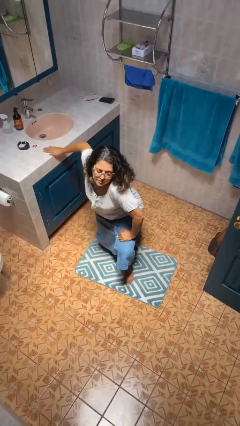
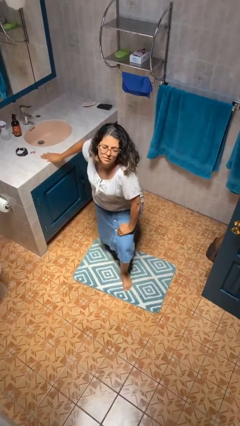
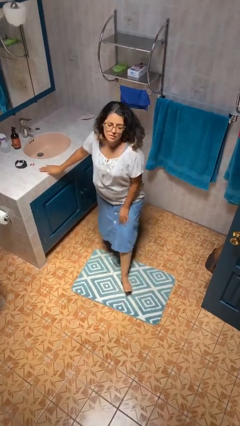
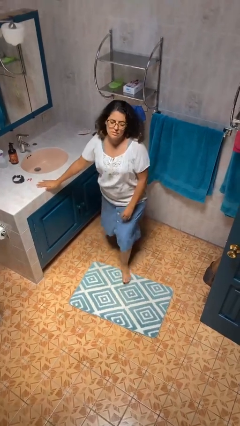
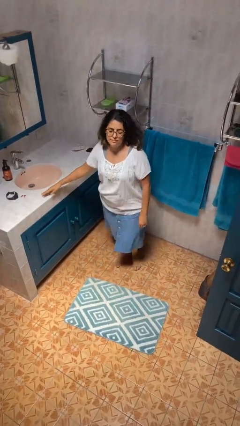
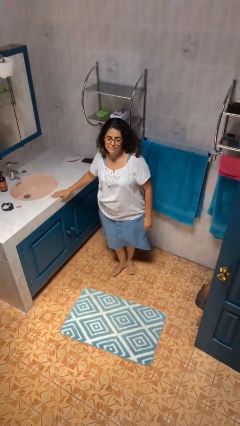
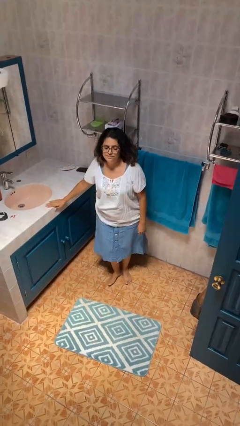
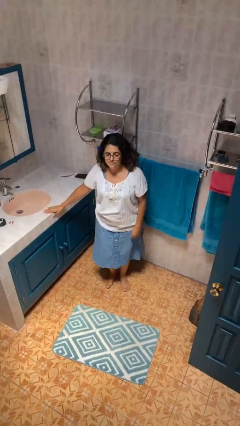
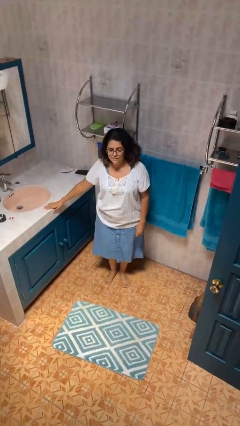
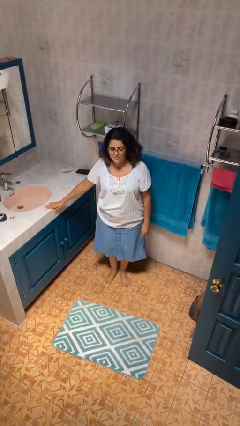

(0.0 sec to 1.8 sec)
person stands up from floor

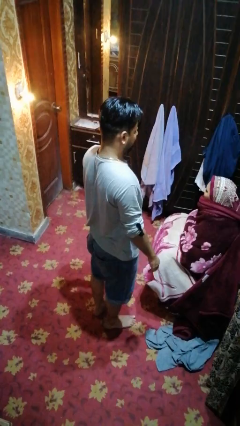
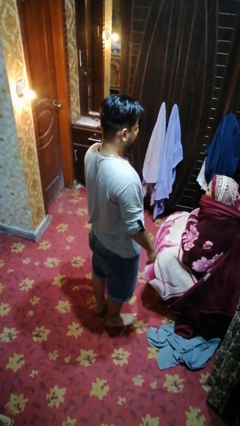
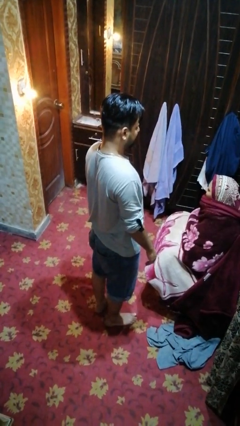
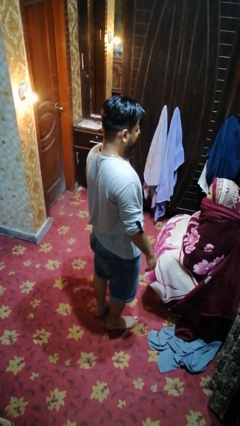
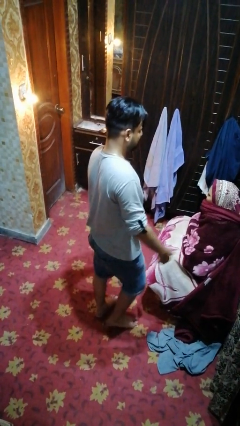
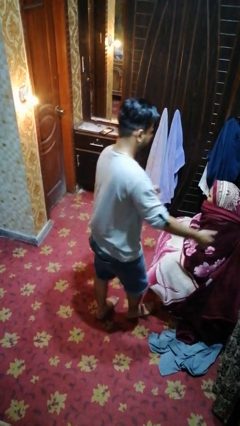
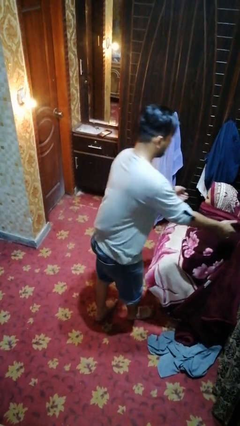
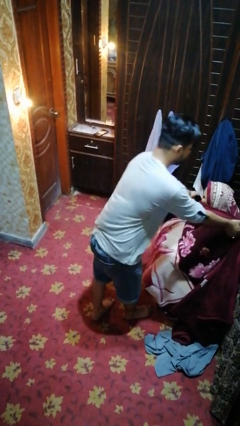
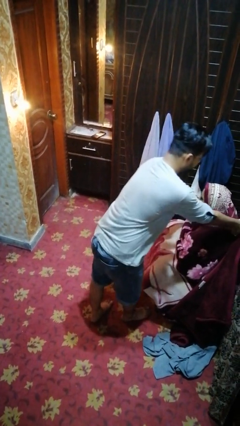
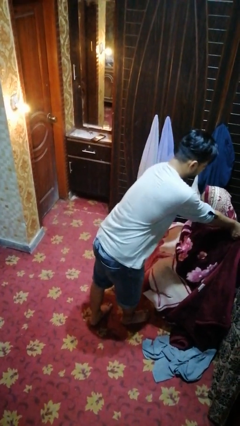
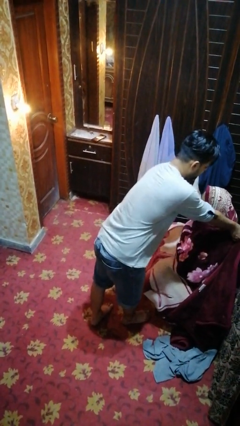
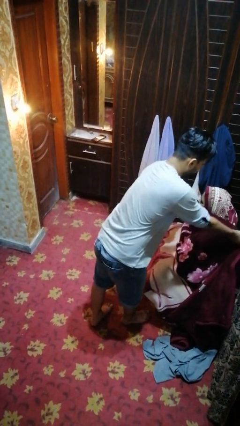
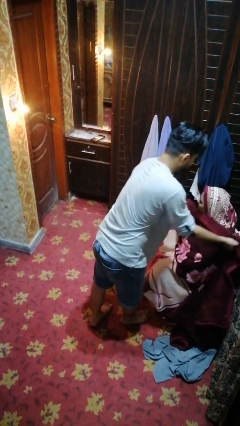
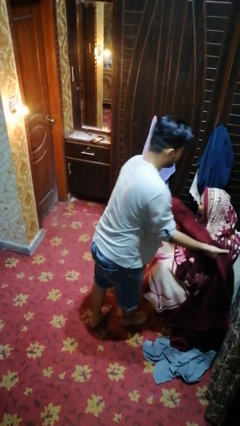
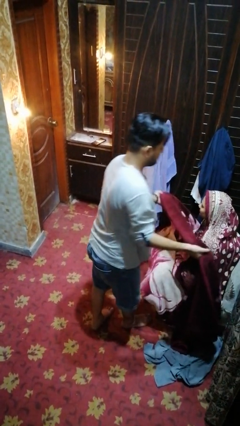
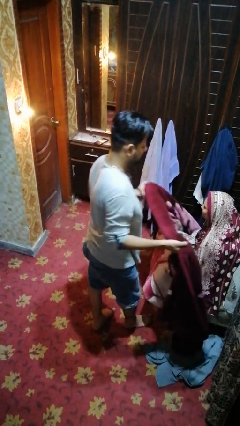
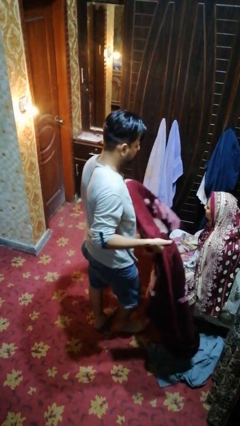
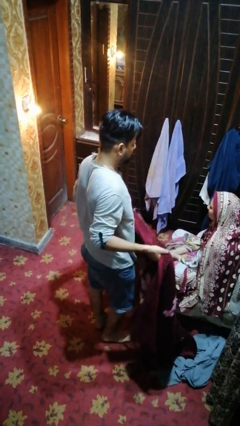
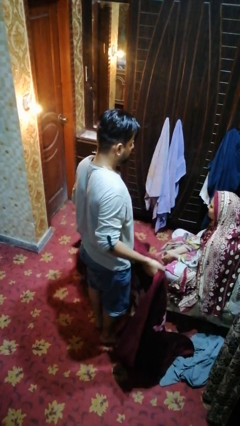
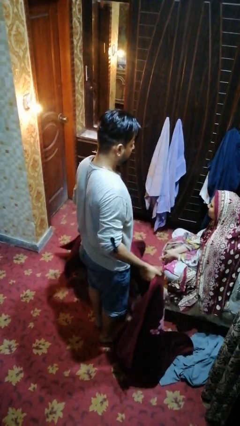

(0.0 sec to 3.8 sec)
person uncovers friend with blanket

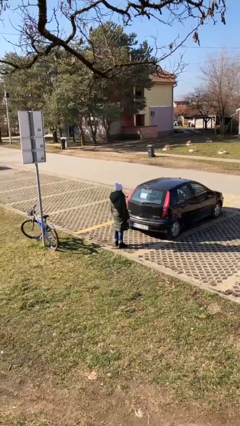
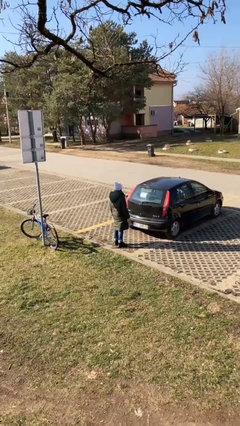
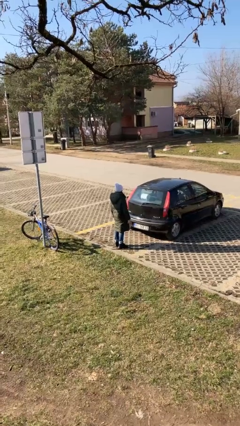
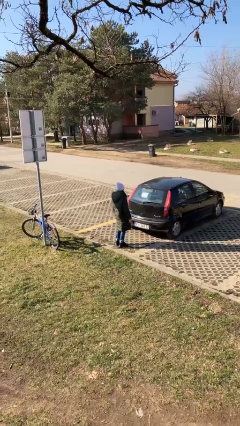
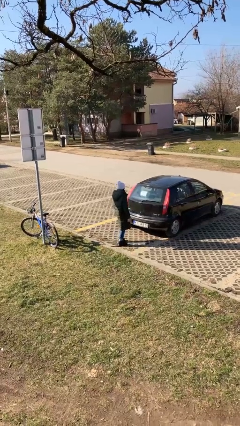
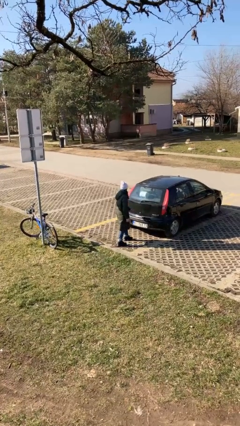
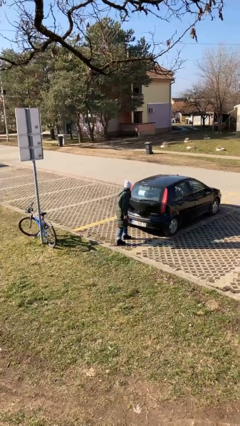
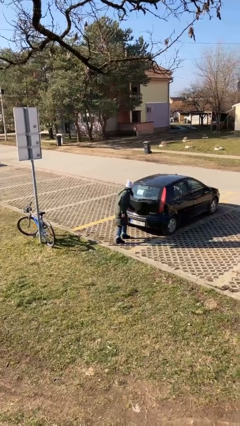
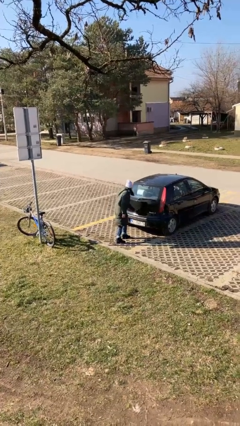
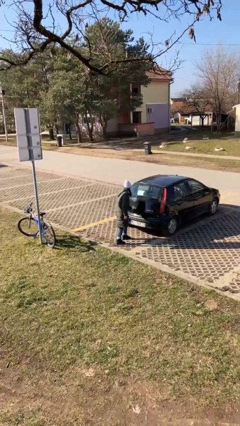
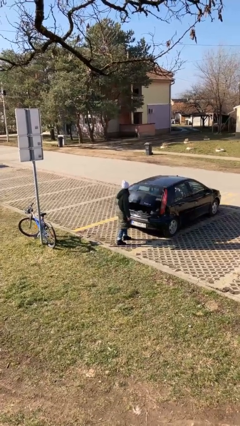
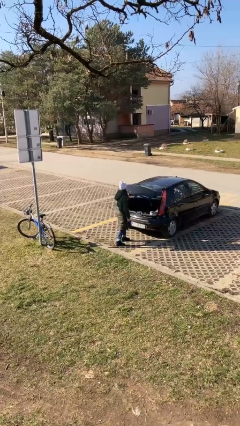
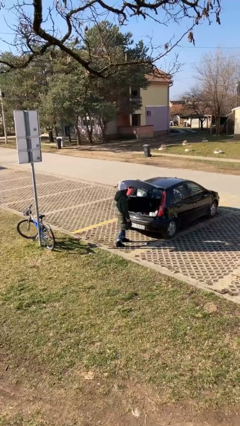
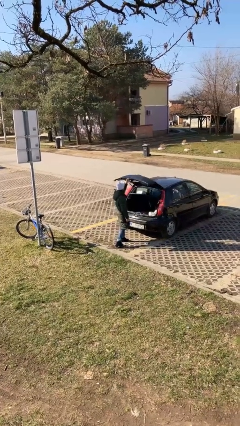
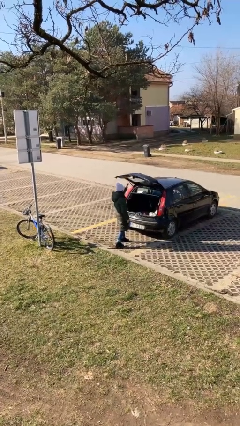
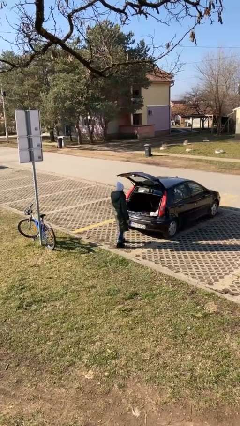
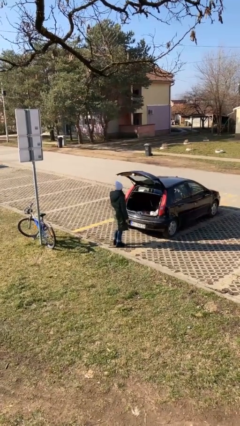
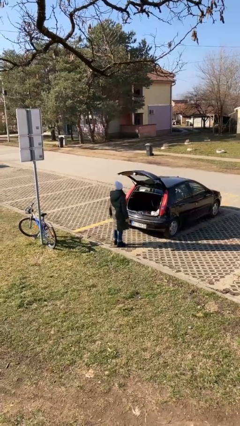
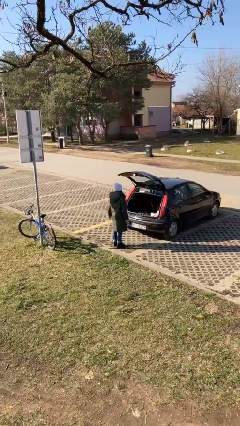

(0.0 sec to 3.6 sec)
person opens car trunk

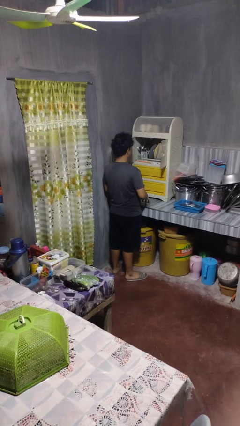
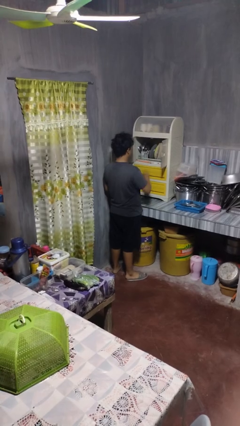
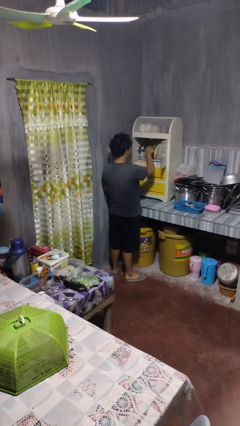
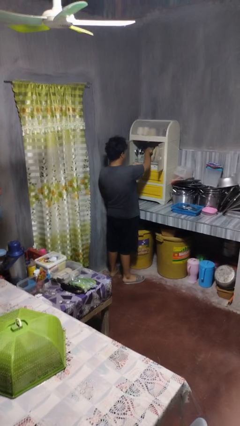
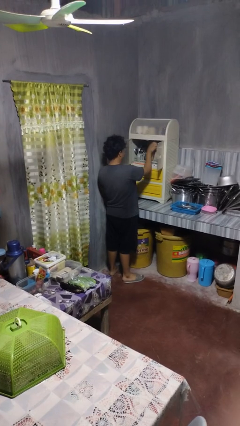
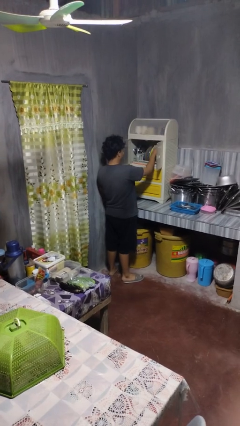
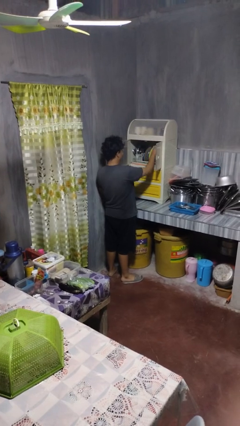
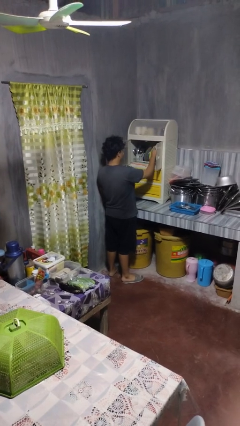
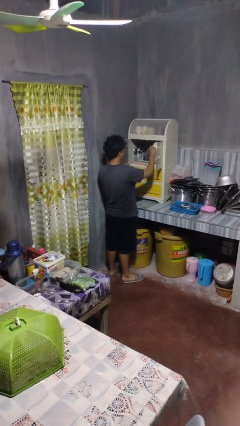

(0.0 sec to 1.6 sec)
person picks up object from cabinet

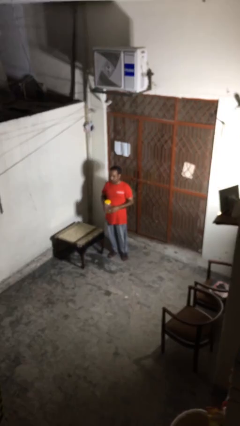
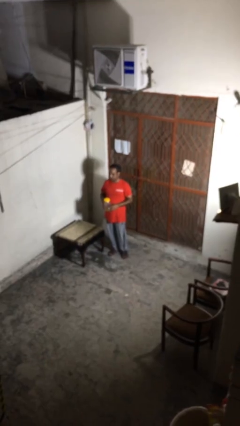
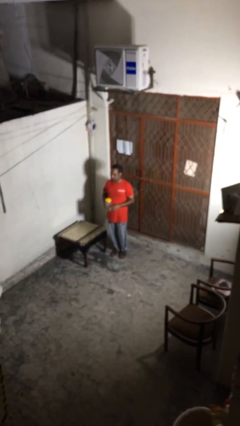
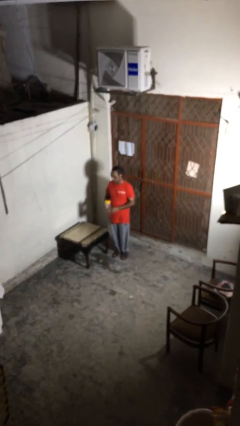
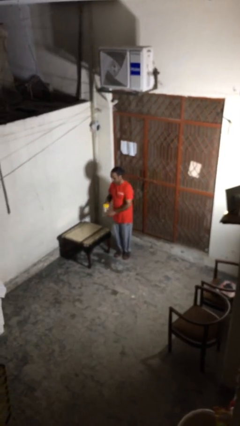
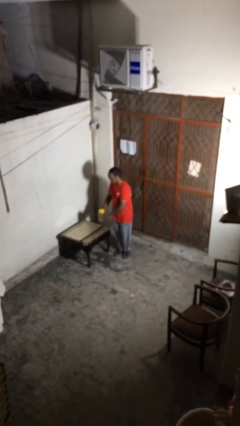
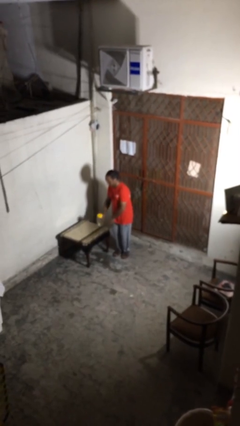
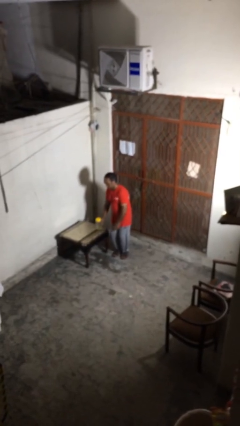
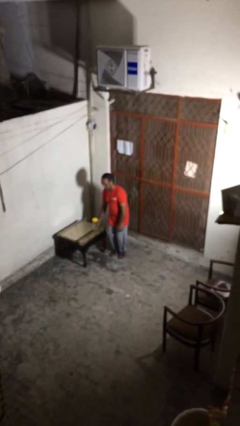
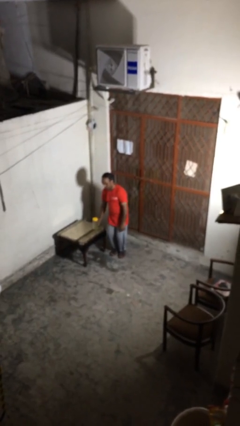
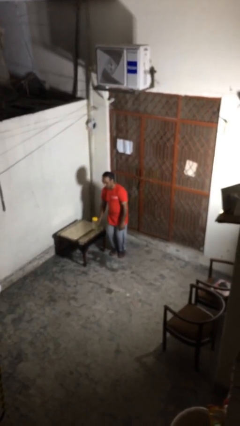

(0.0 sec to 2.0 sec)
person puts down object on table

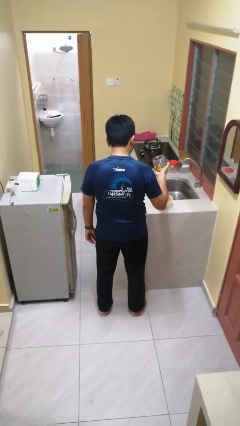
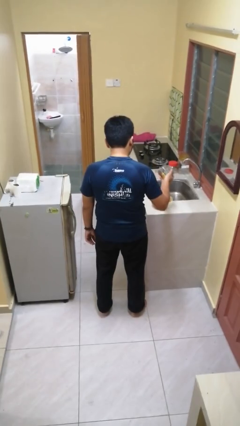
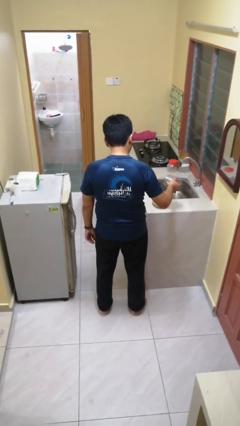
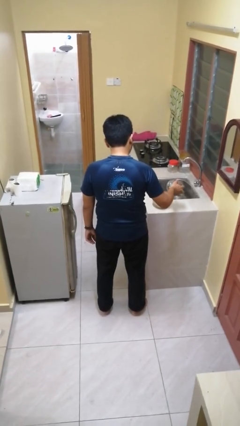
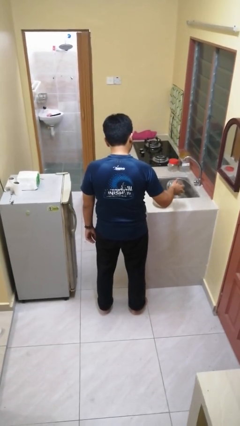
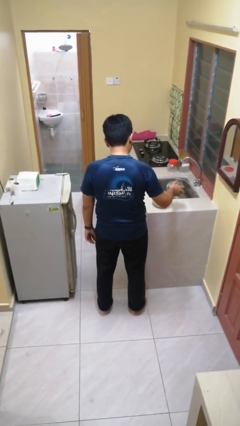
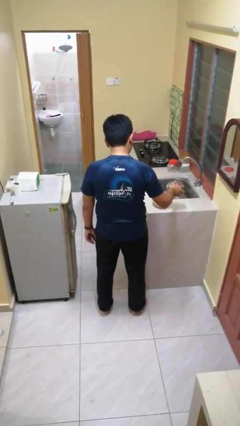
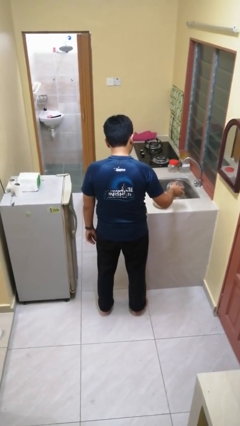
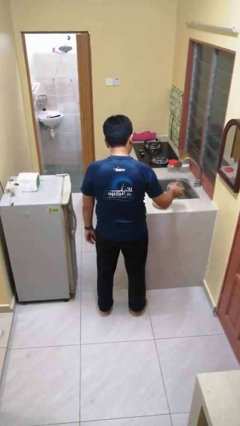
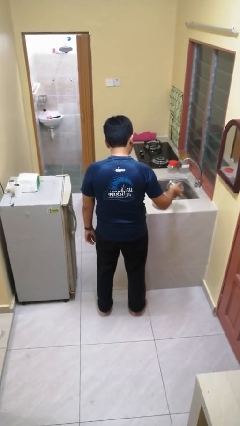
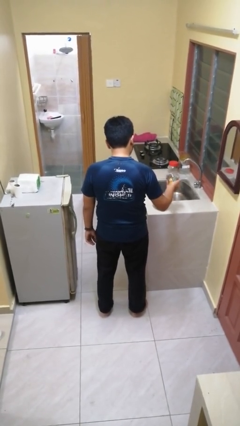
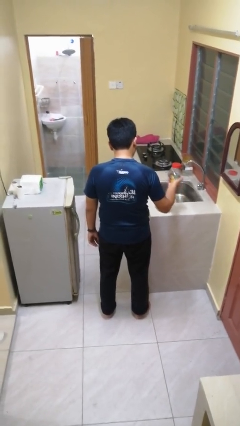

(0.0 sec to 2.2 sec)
person pours into bowl

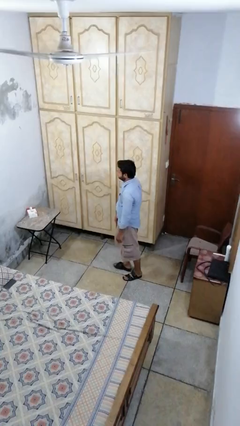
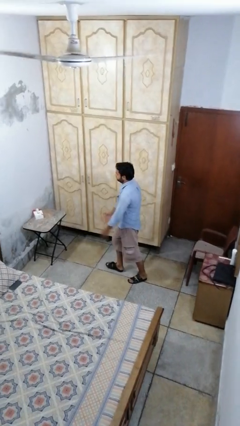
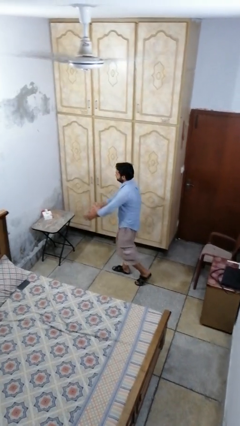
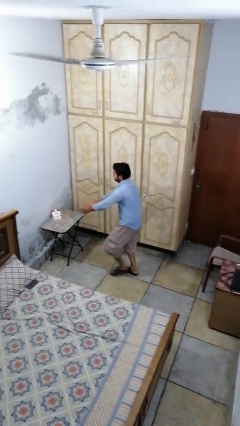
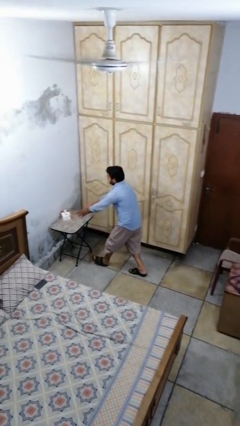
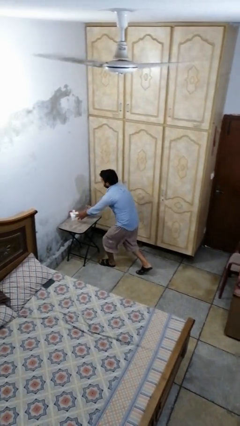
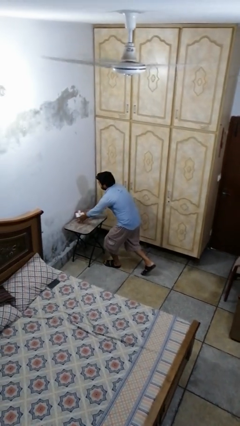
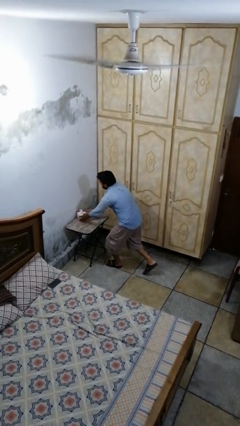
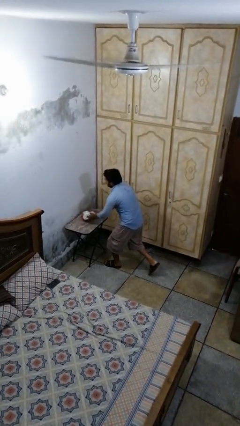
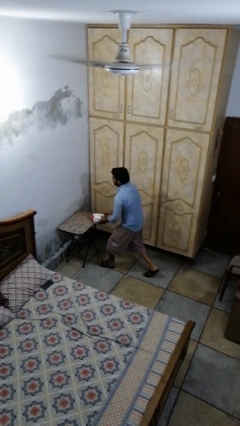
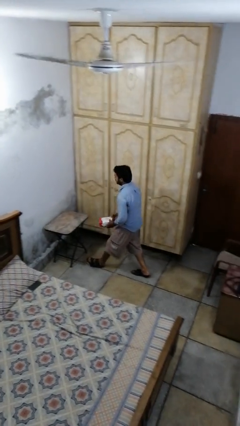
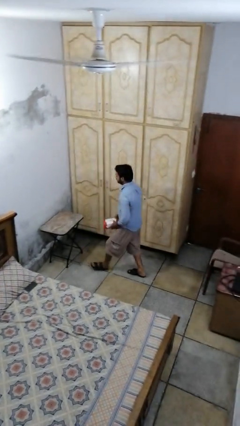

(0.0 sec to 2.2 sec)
person picks up object from table
